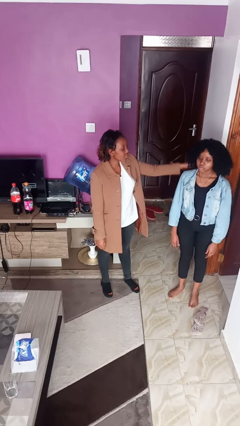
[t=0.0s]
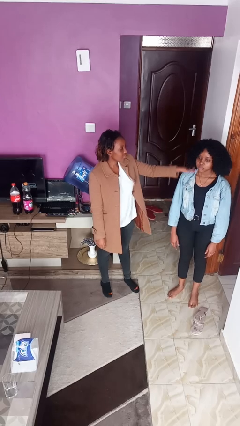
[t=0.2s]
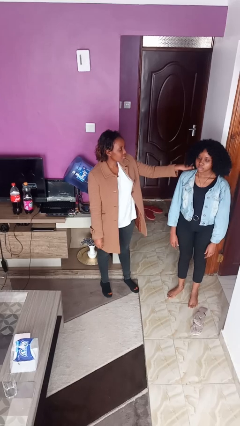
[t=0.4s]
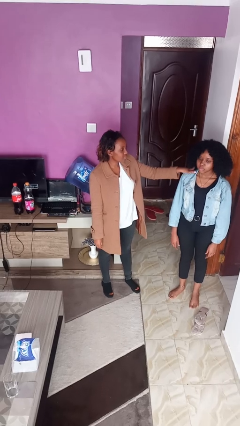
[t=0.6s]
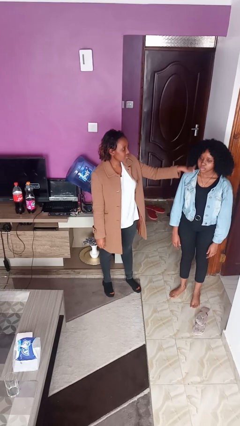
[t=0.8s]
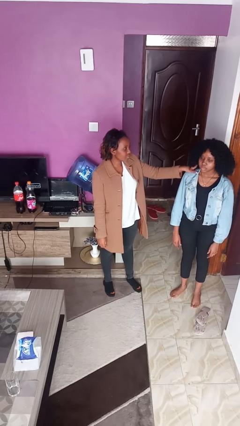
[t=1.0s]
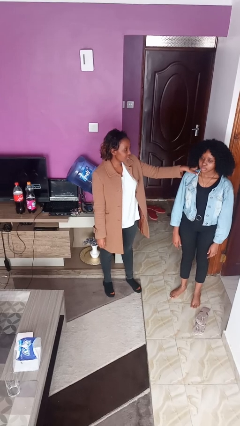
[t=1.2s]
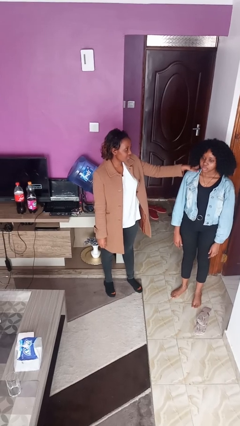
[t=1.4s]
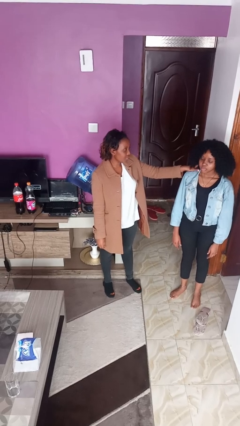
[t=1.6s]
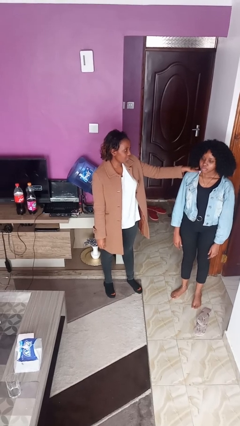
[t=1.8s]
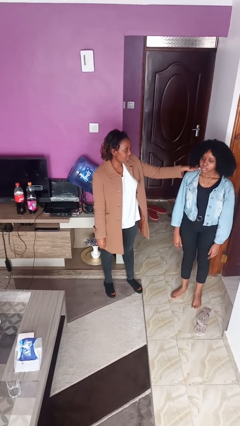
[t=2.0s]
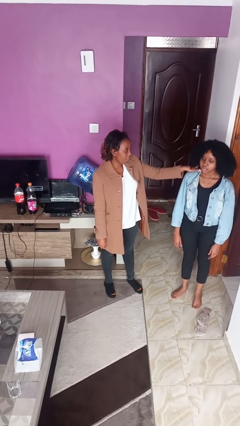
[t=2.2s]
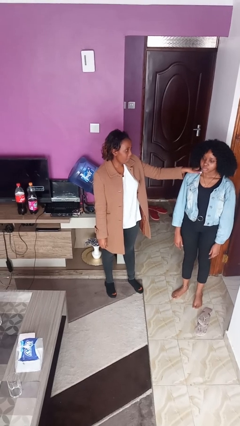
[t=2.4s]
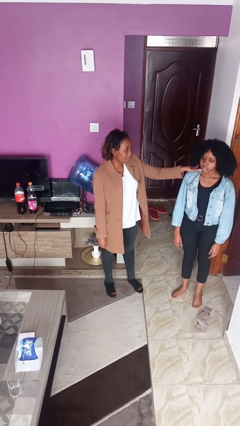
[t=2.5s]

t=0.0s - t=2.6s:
person pounds shoulders of person

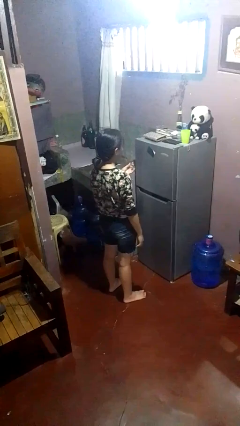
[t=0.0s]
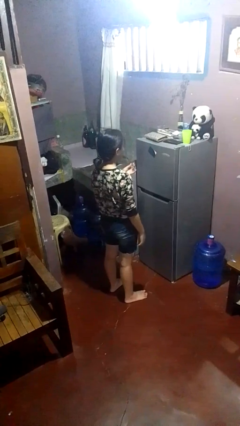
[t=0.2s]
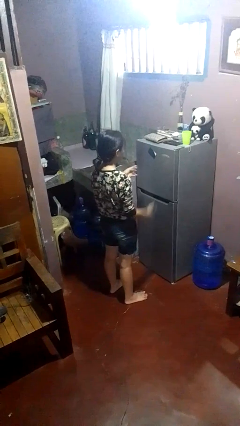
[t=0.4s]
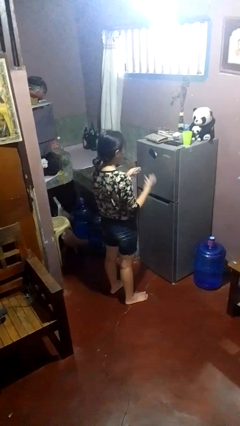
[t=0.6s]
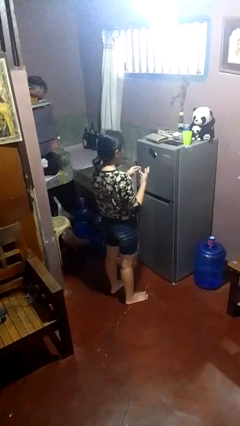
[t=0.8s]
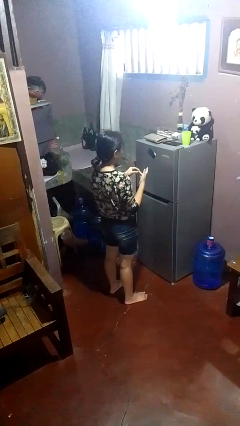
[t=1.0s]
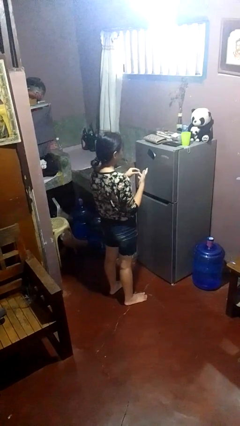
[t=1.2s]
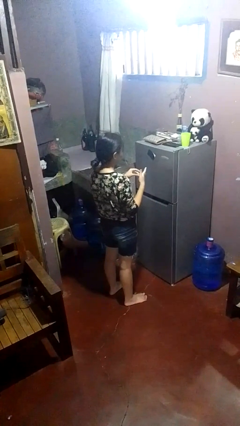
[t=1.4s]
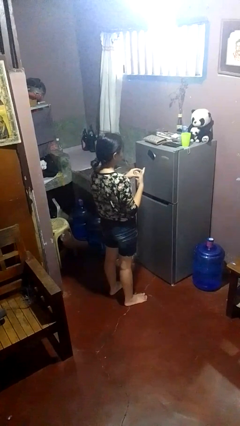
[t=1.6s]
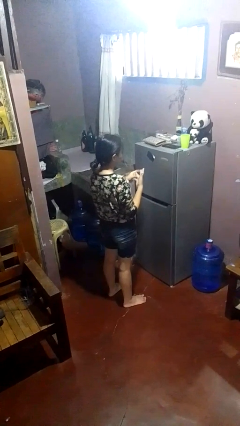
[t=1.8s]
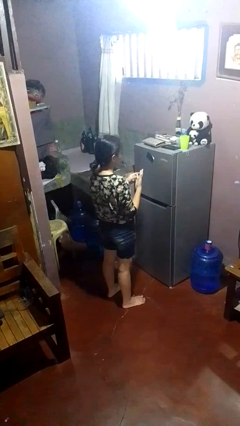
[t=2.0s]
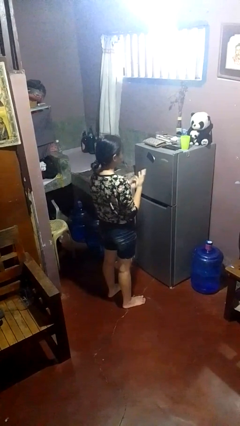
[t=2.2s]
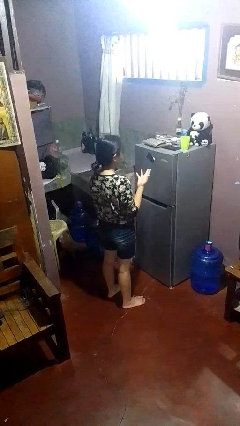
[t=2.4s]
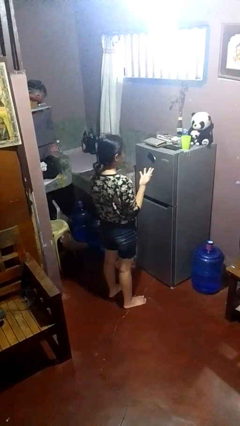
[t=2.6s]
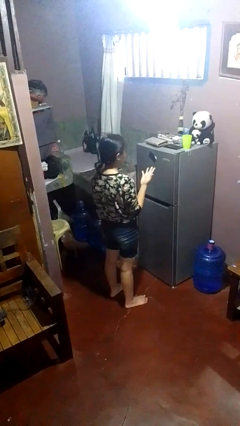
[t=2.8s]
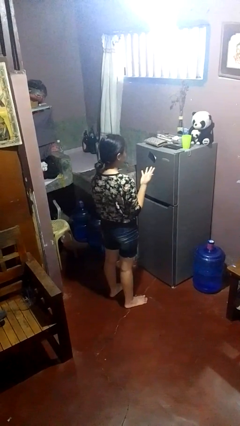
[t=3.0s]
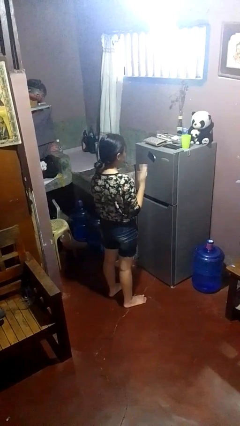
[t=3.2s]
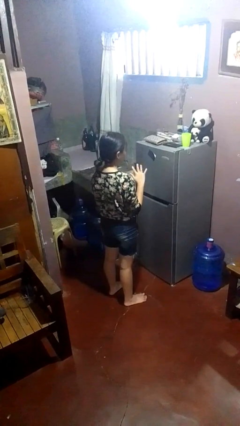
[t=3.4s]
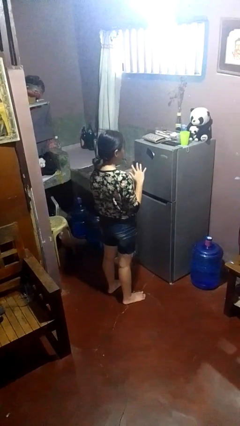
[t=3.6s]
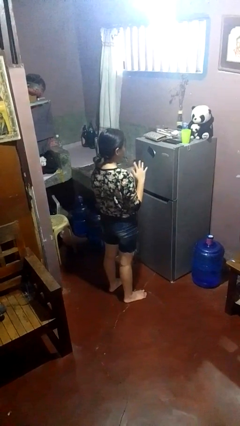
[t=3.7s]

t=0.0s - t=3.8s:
person puts on ring

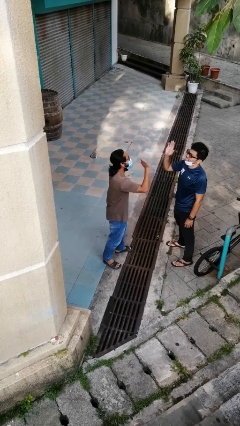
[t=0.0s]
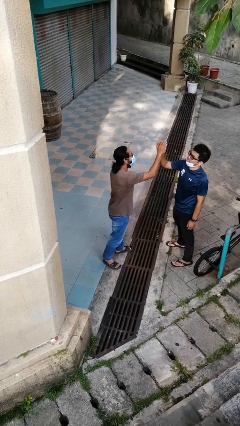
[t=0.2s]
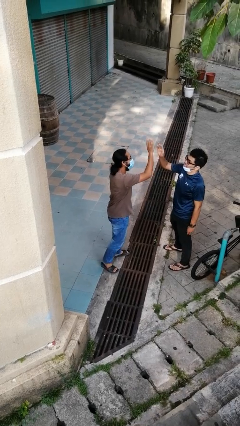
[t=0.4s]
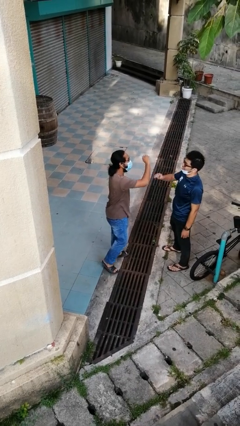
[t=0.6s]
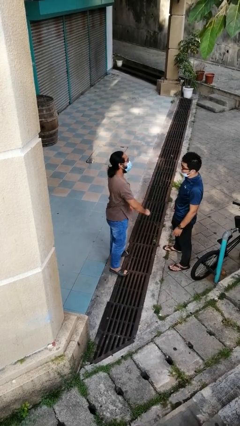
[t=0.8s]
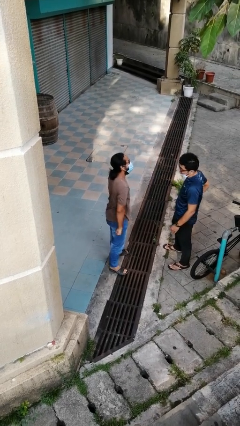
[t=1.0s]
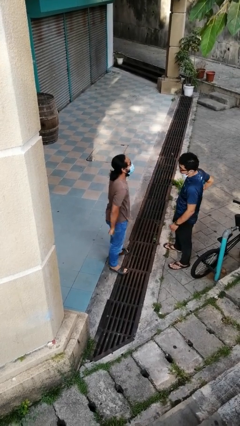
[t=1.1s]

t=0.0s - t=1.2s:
person highfives hand

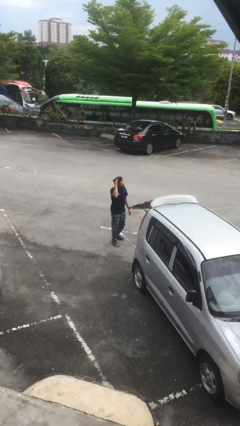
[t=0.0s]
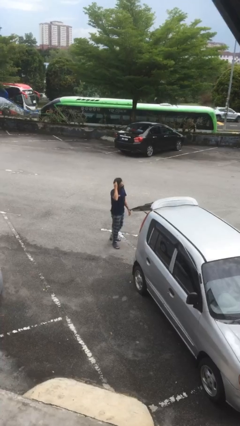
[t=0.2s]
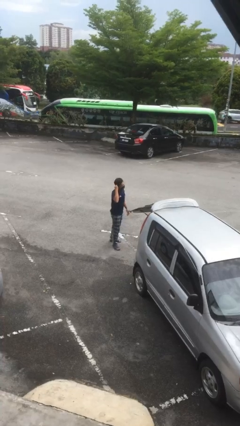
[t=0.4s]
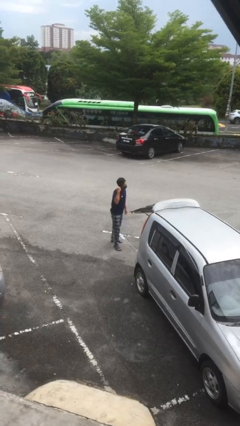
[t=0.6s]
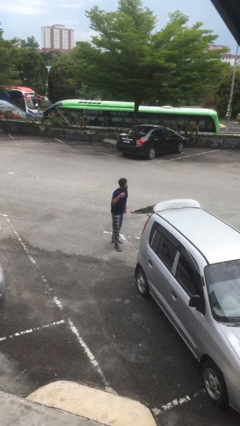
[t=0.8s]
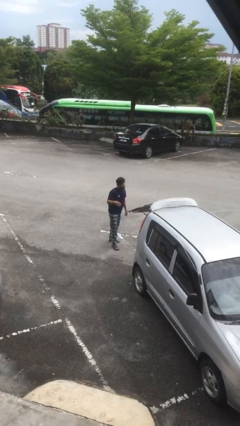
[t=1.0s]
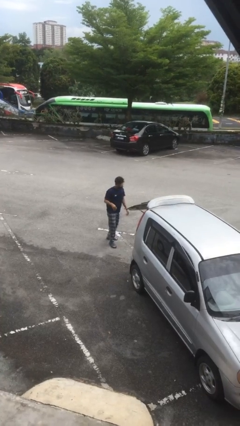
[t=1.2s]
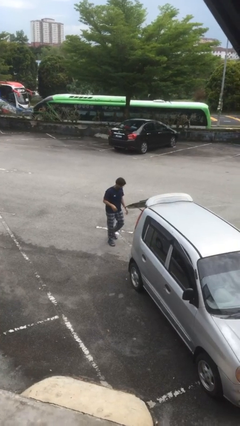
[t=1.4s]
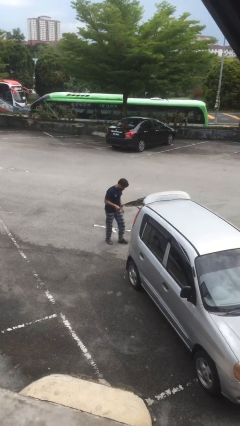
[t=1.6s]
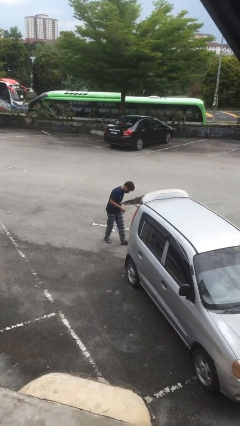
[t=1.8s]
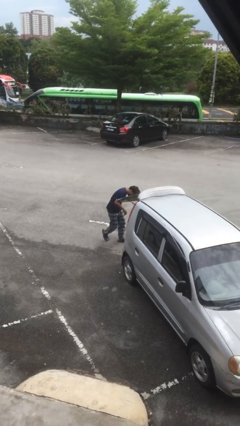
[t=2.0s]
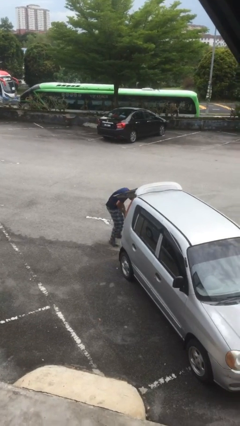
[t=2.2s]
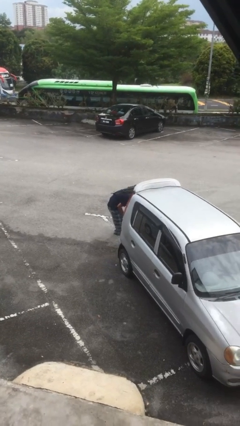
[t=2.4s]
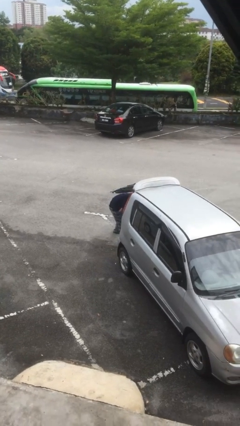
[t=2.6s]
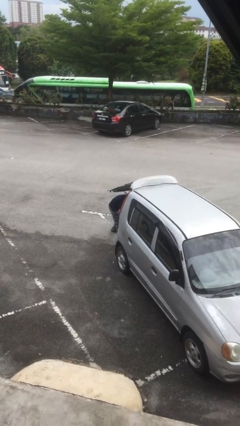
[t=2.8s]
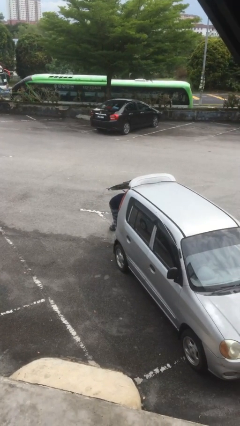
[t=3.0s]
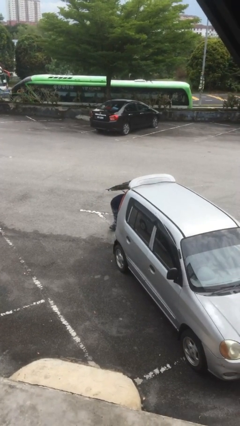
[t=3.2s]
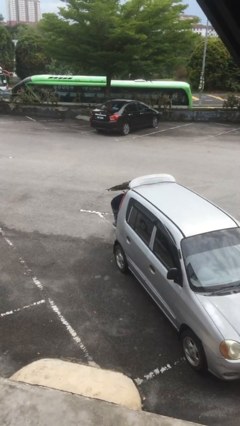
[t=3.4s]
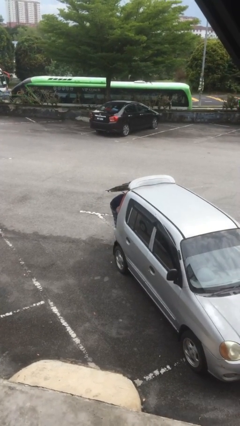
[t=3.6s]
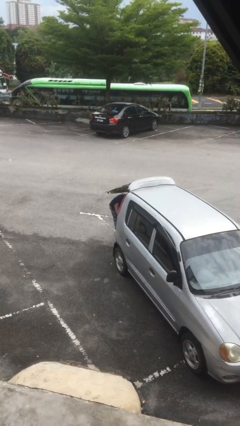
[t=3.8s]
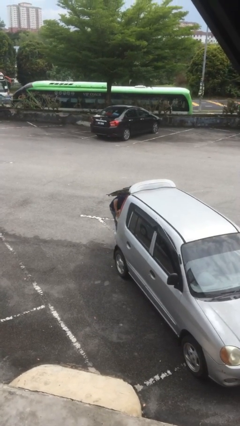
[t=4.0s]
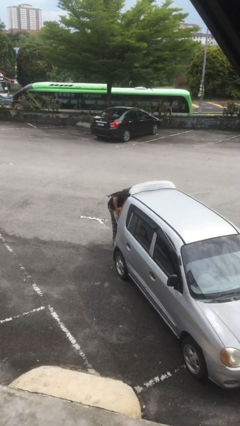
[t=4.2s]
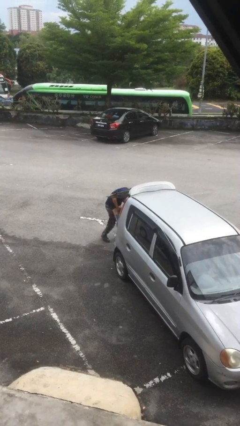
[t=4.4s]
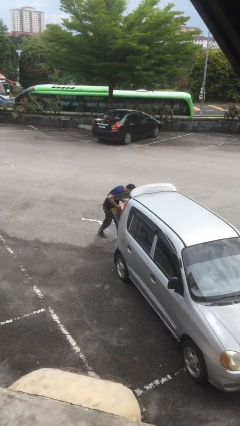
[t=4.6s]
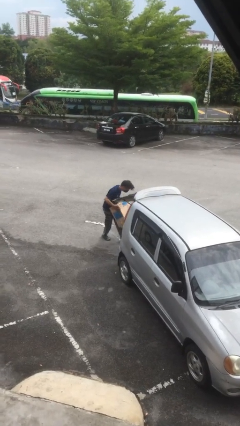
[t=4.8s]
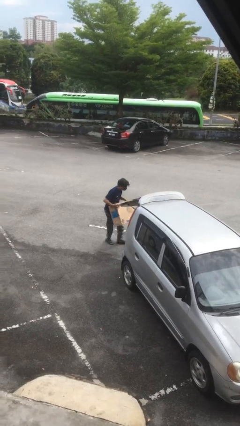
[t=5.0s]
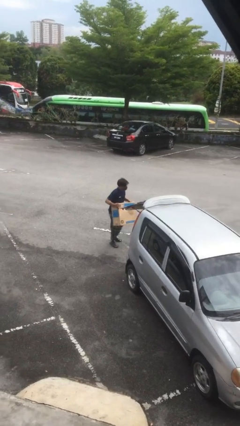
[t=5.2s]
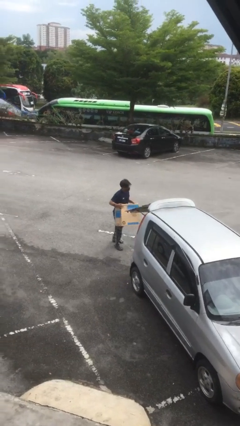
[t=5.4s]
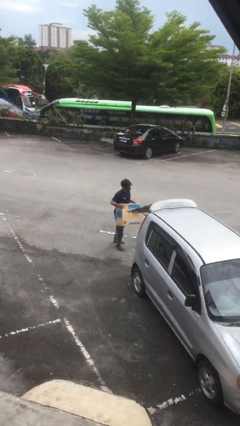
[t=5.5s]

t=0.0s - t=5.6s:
person unloads car

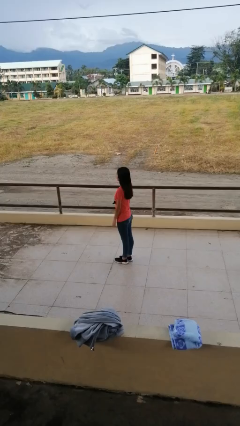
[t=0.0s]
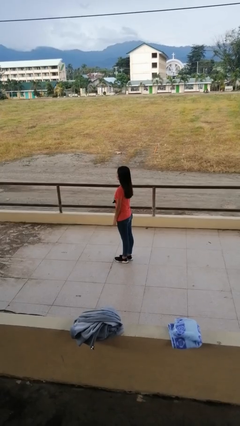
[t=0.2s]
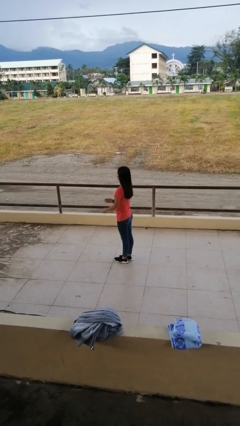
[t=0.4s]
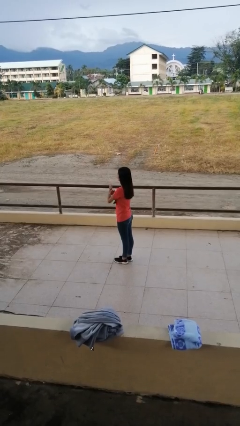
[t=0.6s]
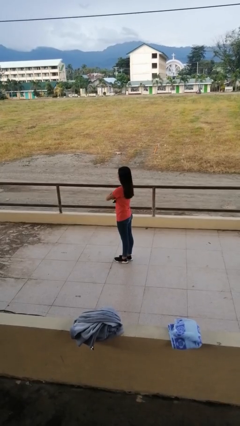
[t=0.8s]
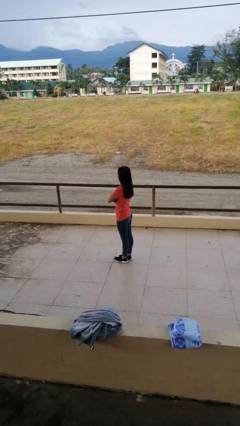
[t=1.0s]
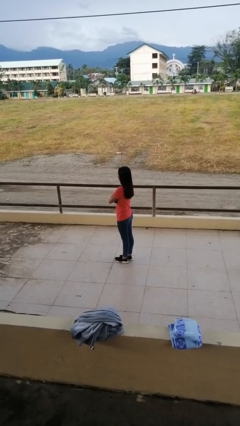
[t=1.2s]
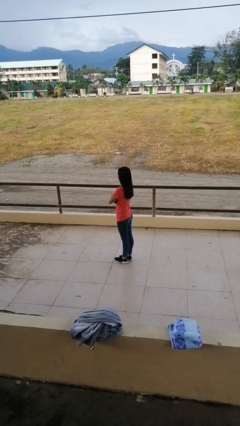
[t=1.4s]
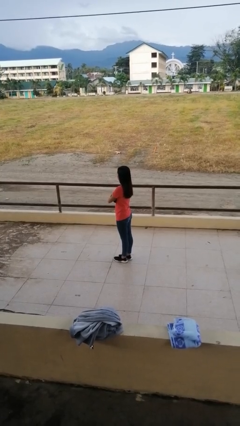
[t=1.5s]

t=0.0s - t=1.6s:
person crosses arms

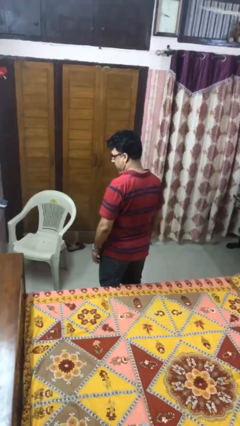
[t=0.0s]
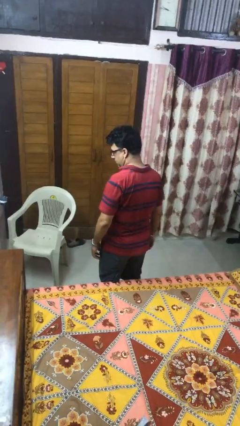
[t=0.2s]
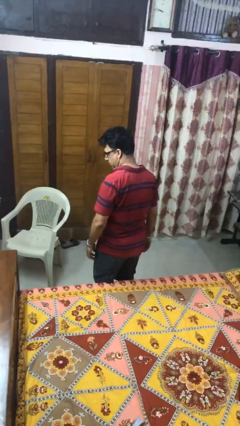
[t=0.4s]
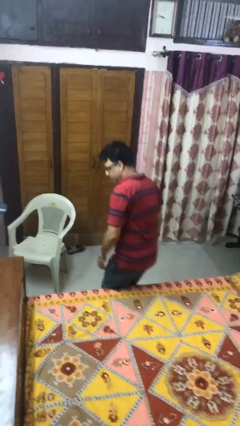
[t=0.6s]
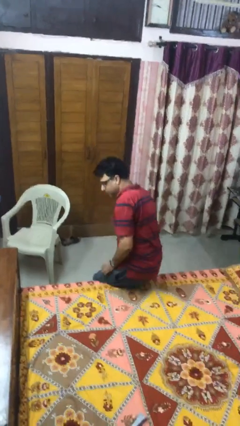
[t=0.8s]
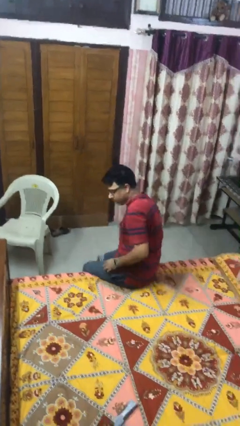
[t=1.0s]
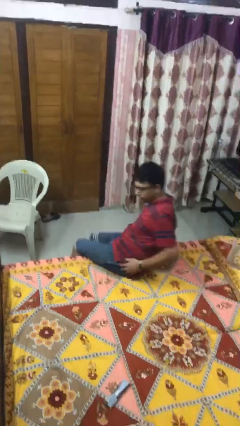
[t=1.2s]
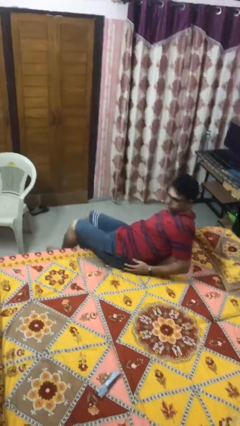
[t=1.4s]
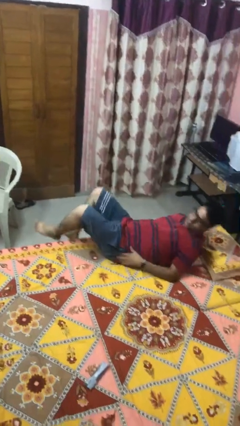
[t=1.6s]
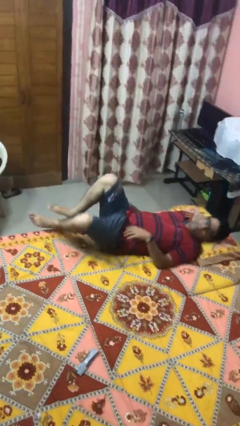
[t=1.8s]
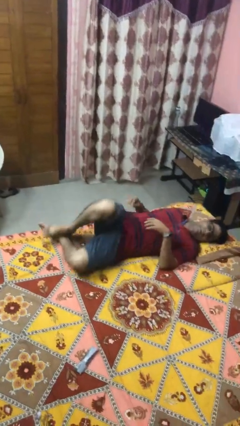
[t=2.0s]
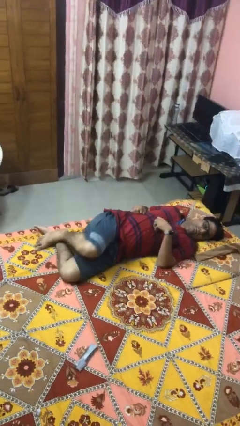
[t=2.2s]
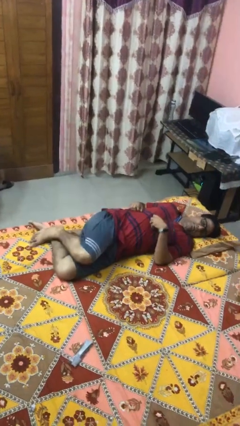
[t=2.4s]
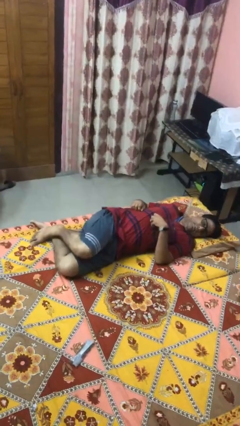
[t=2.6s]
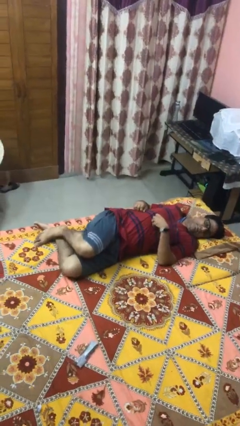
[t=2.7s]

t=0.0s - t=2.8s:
person lies down on bed
